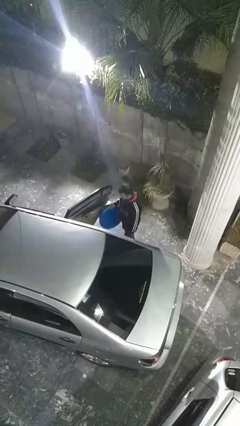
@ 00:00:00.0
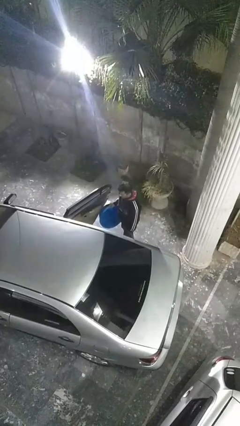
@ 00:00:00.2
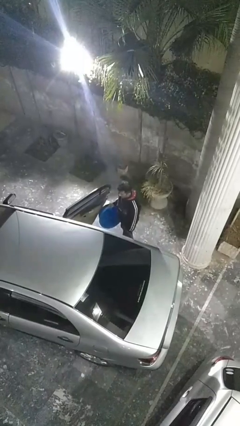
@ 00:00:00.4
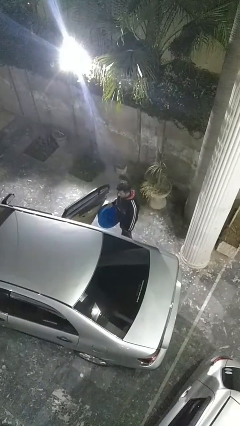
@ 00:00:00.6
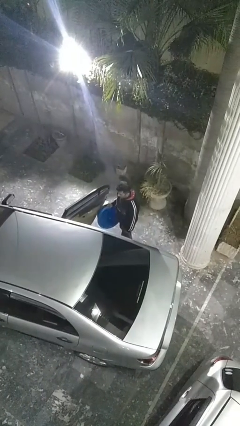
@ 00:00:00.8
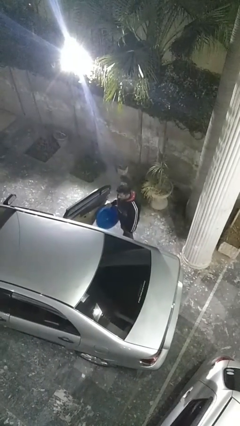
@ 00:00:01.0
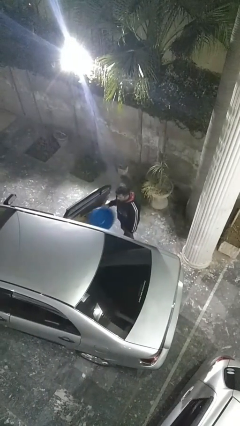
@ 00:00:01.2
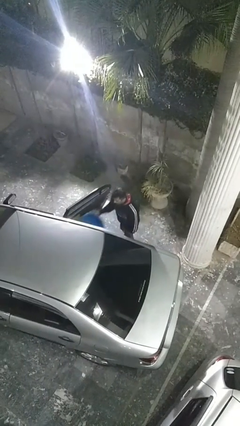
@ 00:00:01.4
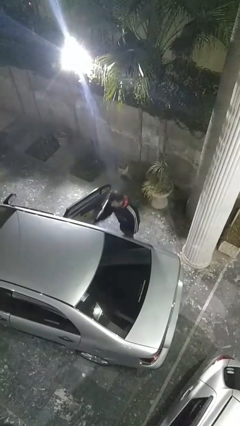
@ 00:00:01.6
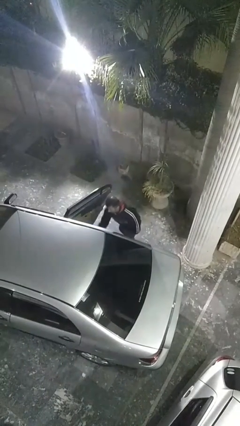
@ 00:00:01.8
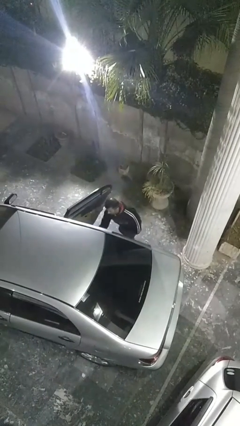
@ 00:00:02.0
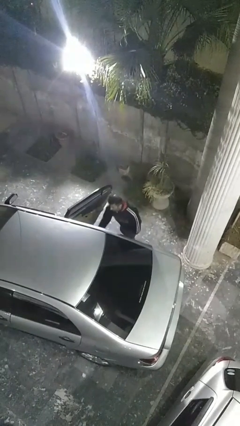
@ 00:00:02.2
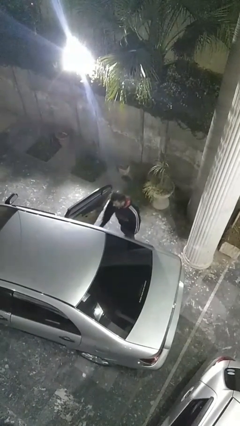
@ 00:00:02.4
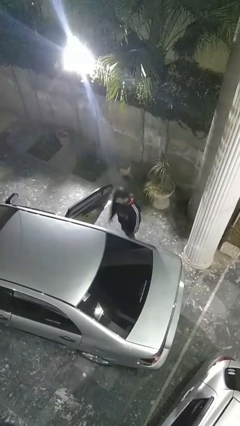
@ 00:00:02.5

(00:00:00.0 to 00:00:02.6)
person loads car

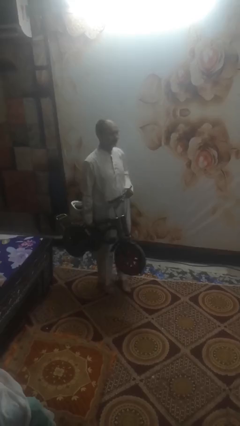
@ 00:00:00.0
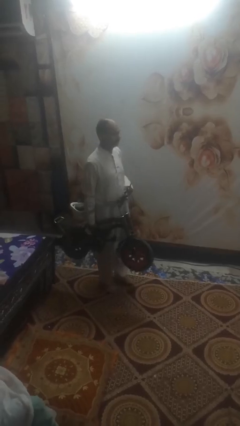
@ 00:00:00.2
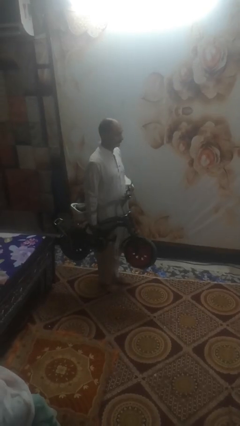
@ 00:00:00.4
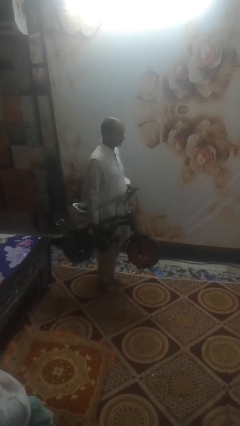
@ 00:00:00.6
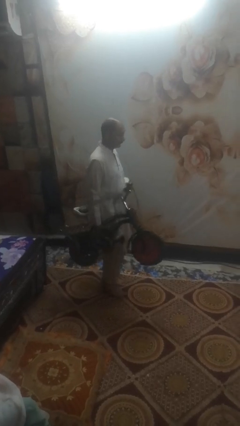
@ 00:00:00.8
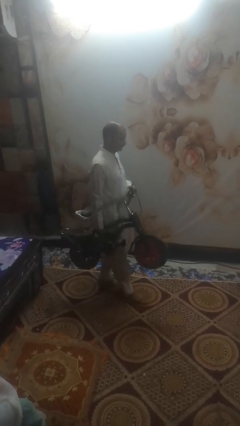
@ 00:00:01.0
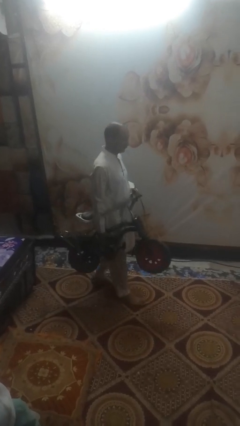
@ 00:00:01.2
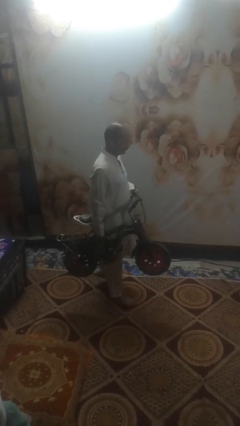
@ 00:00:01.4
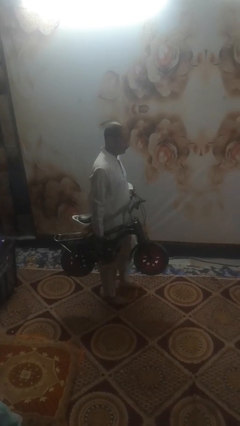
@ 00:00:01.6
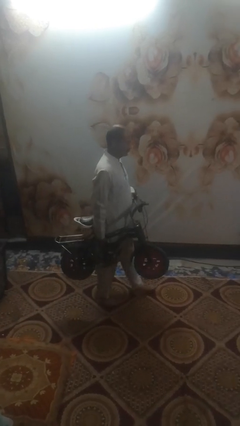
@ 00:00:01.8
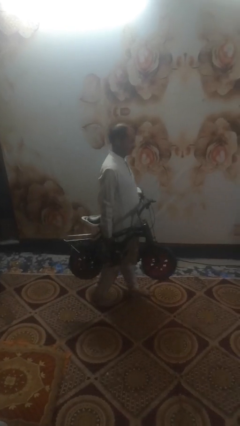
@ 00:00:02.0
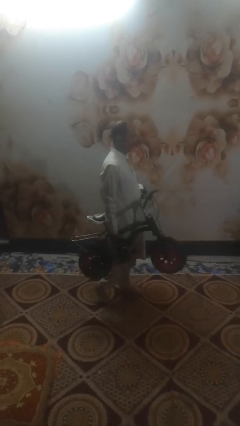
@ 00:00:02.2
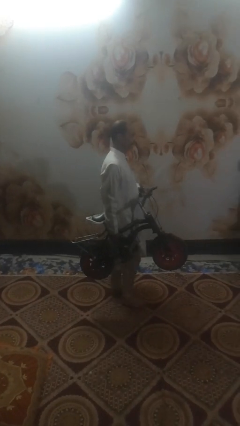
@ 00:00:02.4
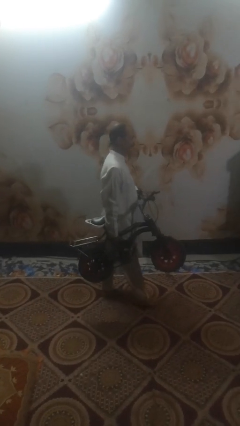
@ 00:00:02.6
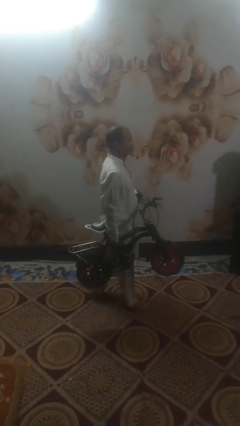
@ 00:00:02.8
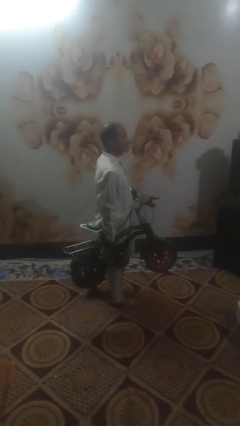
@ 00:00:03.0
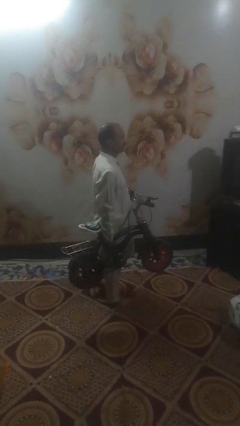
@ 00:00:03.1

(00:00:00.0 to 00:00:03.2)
person carries bicycle

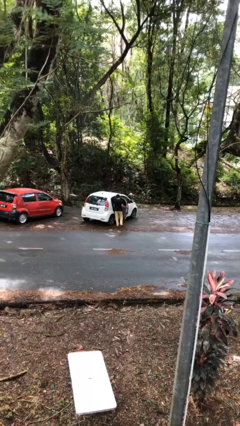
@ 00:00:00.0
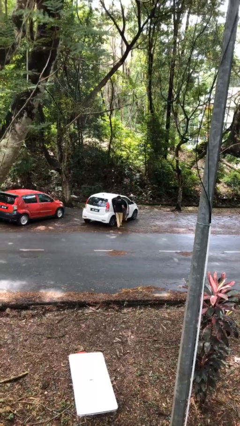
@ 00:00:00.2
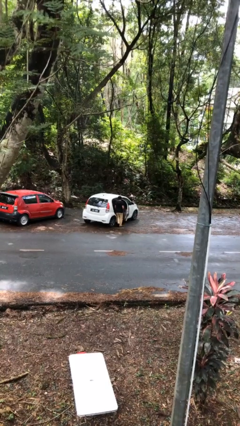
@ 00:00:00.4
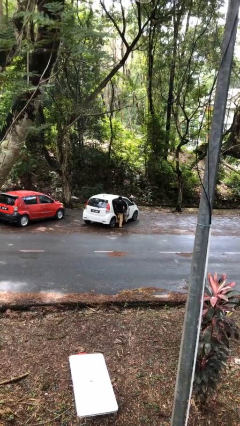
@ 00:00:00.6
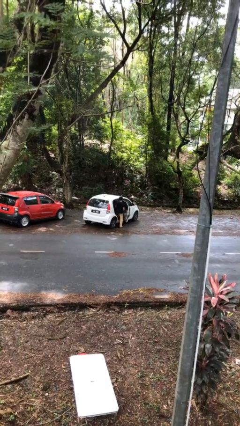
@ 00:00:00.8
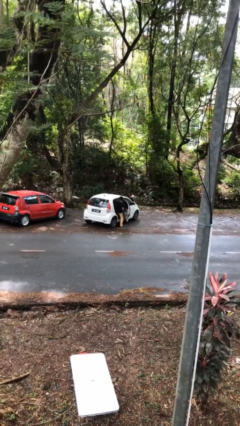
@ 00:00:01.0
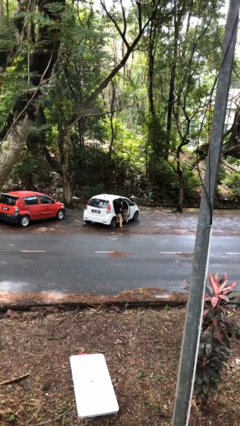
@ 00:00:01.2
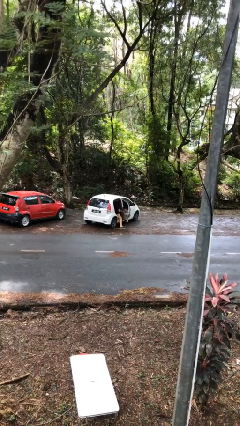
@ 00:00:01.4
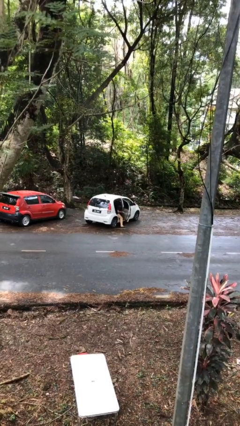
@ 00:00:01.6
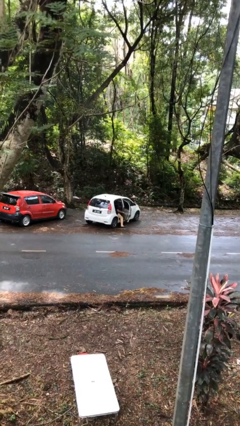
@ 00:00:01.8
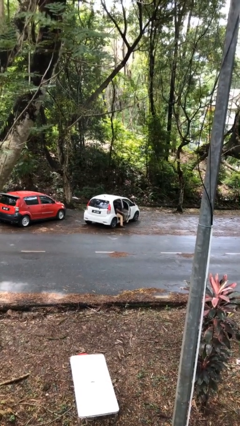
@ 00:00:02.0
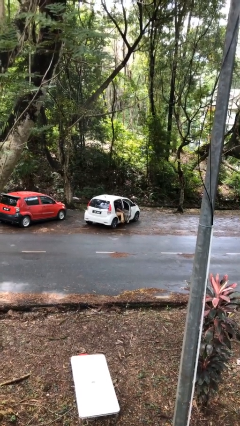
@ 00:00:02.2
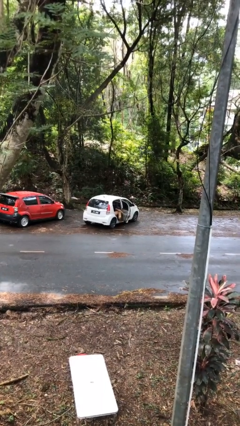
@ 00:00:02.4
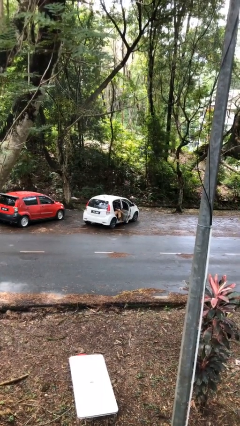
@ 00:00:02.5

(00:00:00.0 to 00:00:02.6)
person enters car

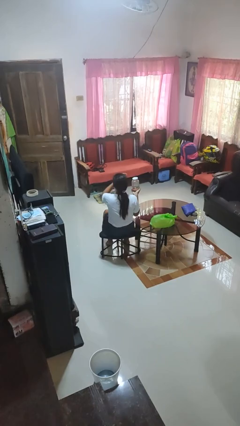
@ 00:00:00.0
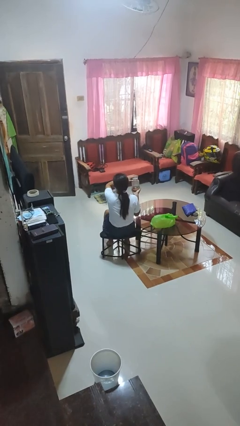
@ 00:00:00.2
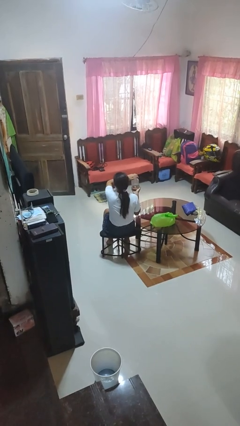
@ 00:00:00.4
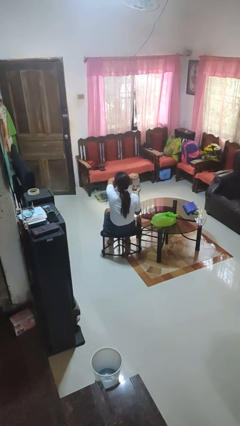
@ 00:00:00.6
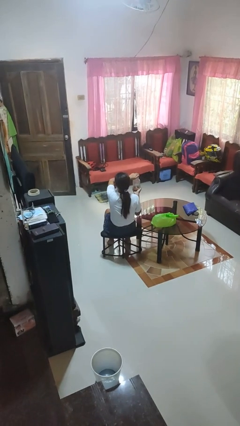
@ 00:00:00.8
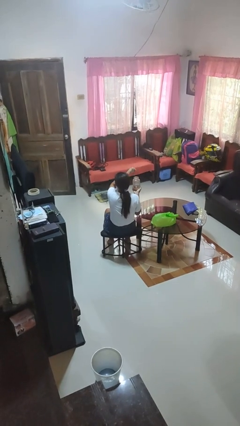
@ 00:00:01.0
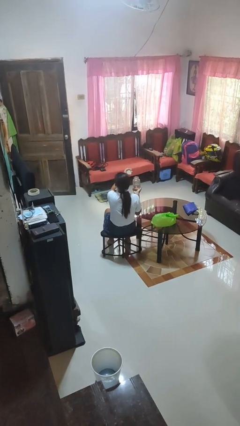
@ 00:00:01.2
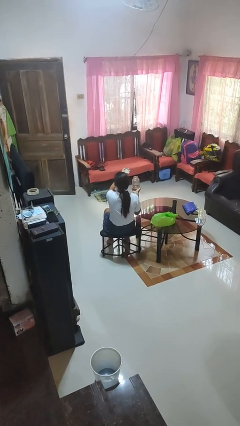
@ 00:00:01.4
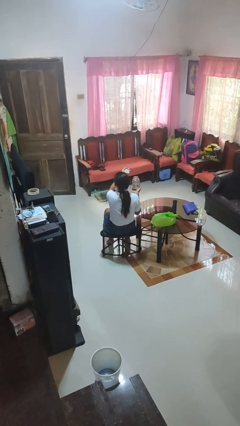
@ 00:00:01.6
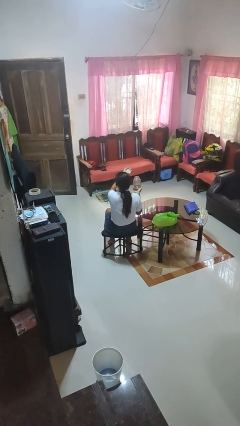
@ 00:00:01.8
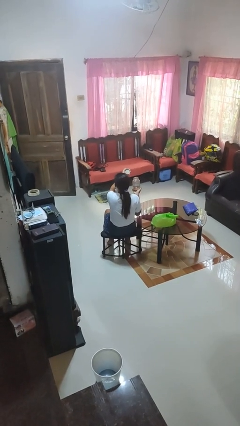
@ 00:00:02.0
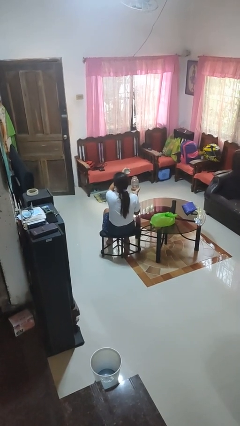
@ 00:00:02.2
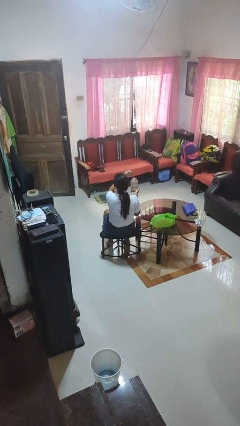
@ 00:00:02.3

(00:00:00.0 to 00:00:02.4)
person opens jar

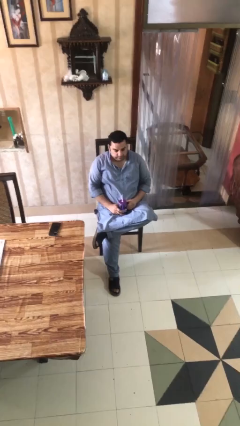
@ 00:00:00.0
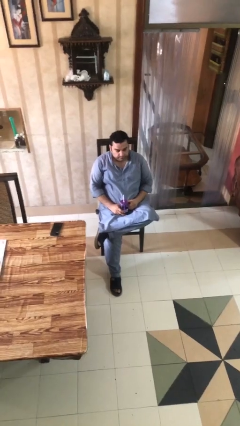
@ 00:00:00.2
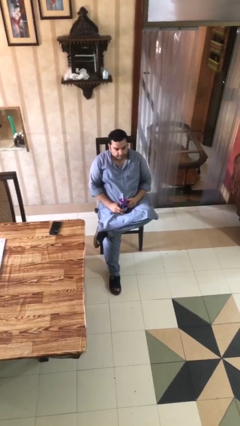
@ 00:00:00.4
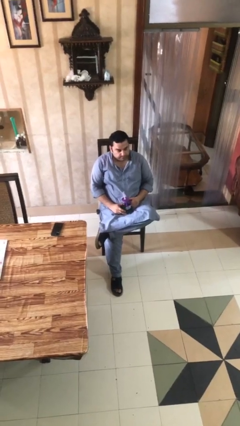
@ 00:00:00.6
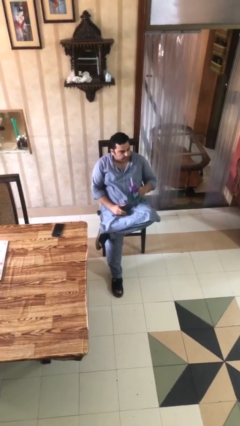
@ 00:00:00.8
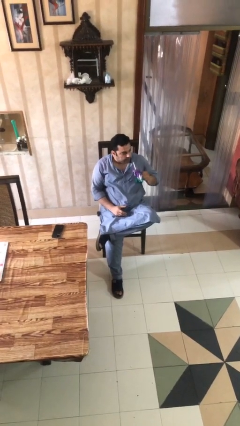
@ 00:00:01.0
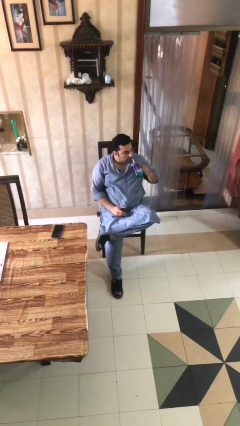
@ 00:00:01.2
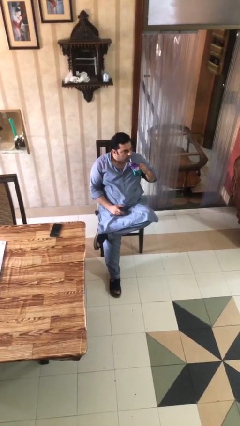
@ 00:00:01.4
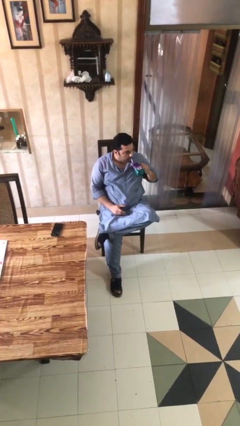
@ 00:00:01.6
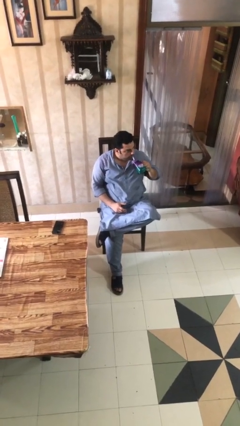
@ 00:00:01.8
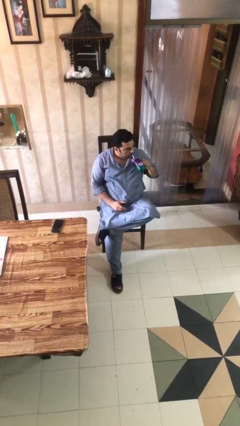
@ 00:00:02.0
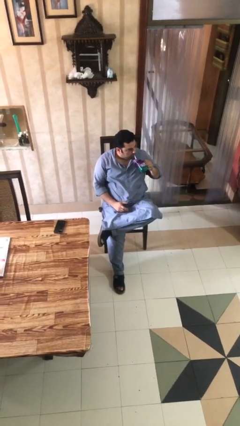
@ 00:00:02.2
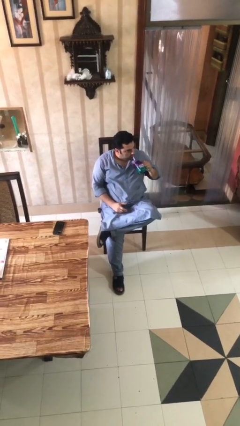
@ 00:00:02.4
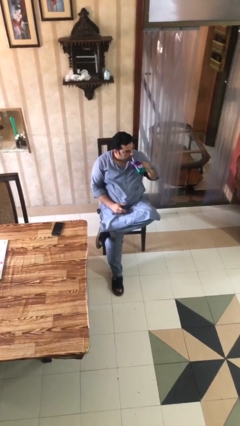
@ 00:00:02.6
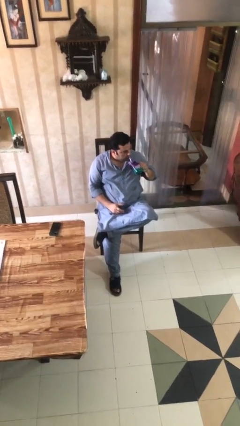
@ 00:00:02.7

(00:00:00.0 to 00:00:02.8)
person drinks from straw

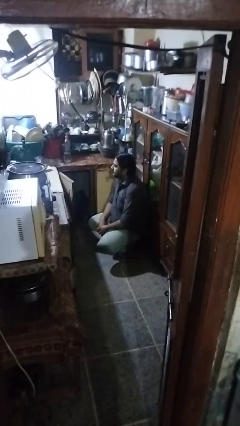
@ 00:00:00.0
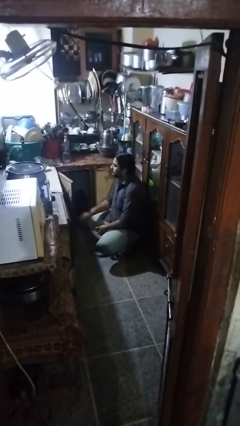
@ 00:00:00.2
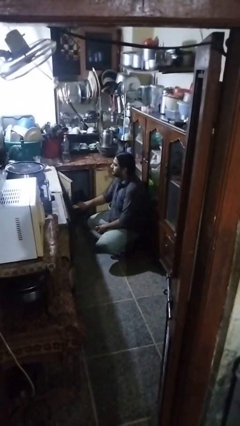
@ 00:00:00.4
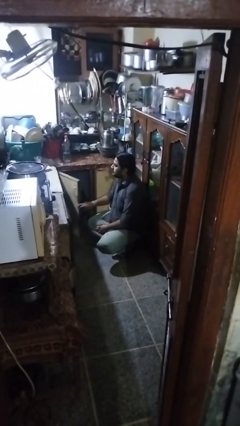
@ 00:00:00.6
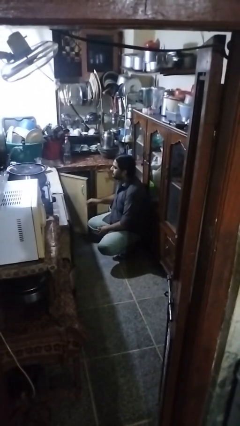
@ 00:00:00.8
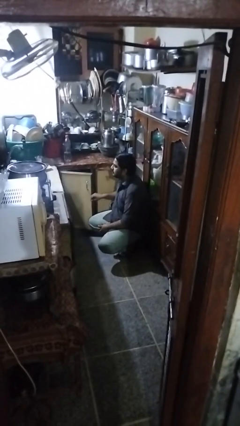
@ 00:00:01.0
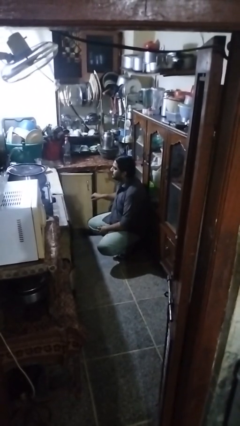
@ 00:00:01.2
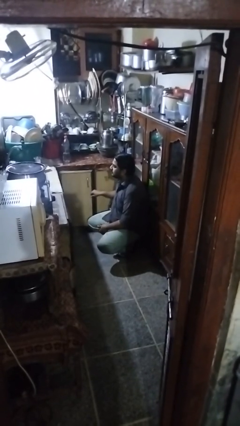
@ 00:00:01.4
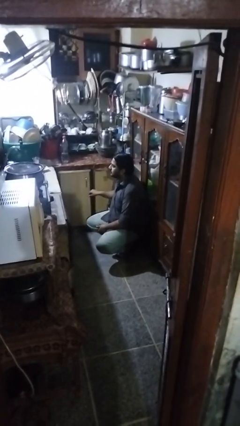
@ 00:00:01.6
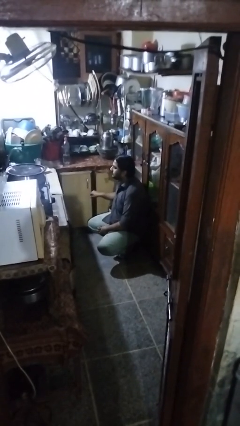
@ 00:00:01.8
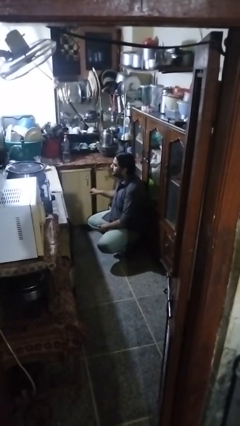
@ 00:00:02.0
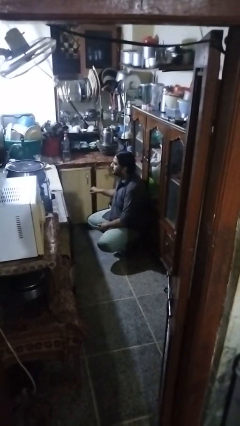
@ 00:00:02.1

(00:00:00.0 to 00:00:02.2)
person closes cabinet

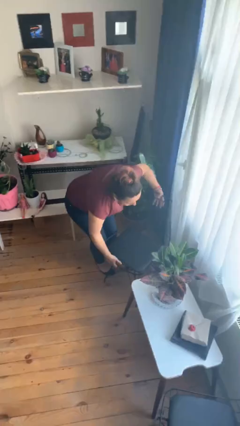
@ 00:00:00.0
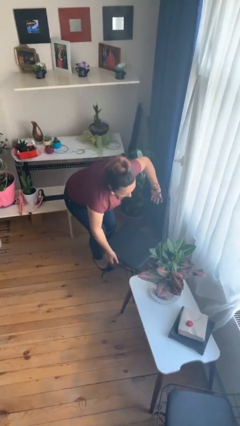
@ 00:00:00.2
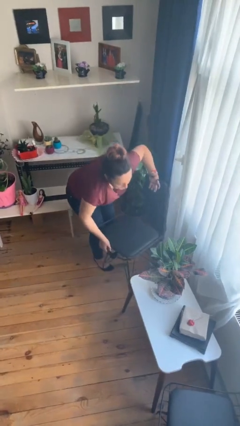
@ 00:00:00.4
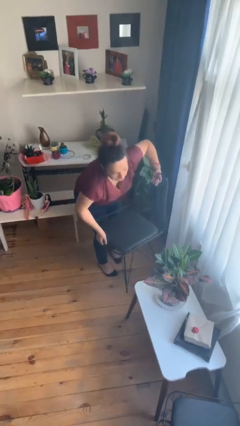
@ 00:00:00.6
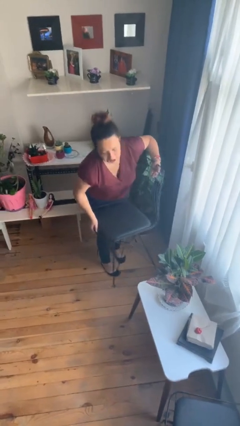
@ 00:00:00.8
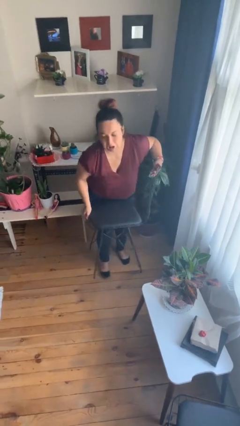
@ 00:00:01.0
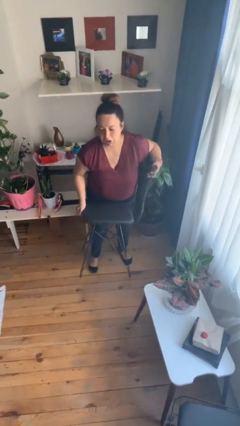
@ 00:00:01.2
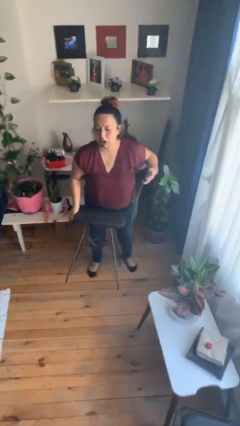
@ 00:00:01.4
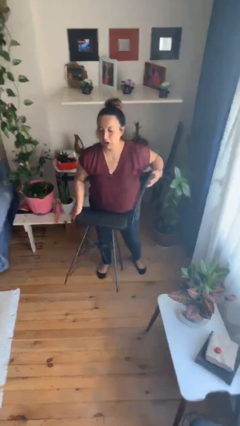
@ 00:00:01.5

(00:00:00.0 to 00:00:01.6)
person picks up object from floor
